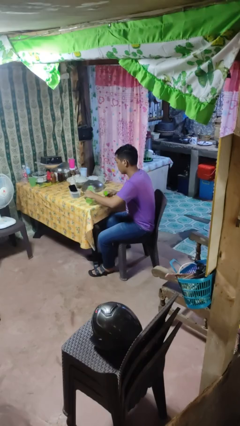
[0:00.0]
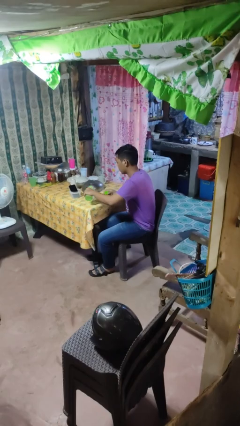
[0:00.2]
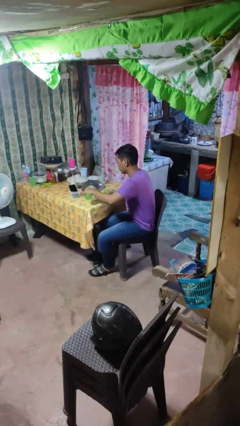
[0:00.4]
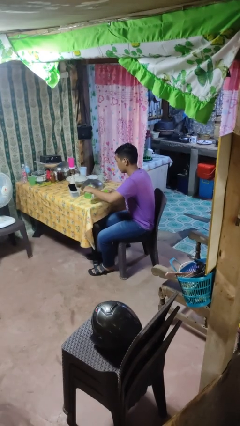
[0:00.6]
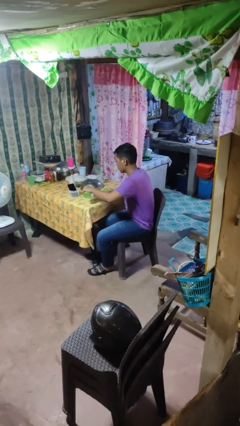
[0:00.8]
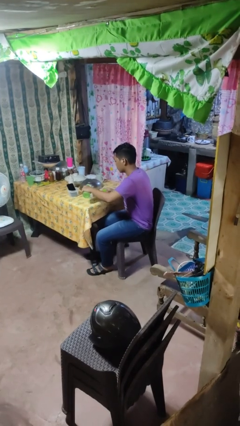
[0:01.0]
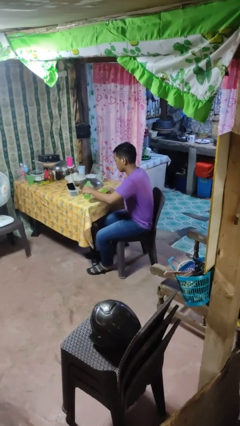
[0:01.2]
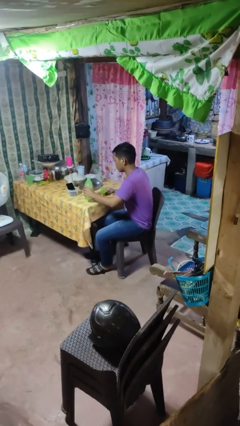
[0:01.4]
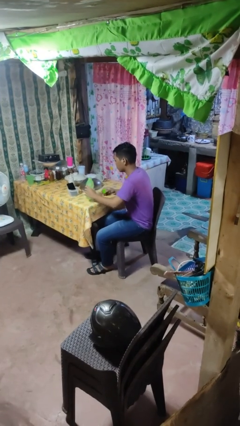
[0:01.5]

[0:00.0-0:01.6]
person pours liquid into cup

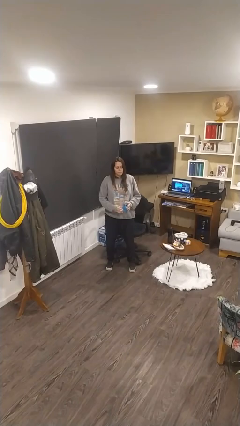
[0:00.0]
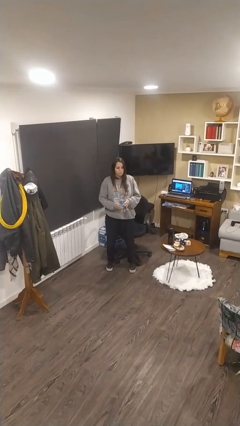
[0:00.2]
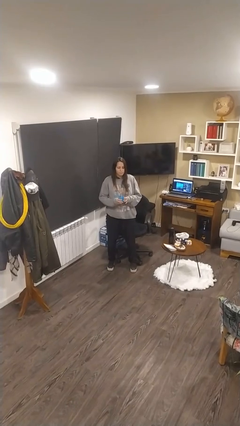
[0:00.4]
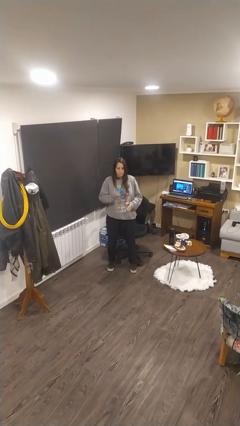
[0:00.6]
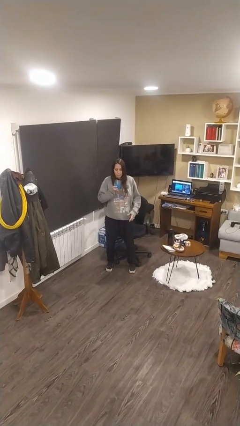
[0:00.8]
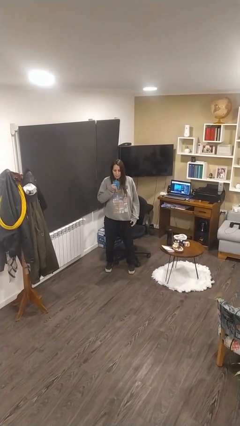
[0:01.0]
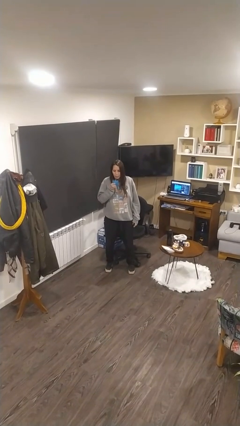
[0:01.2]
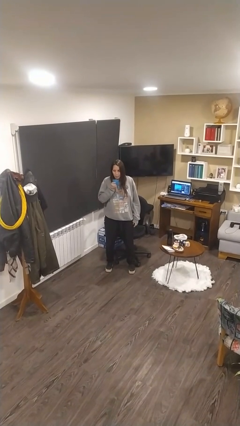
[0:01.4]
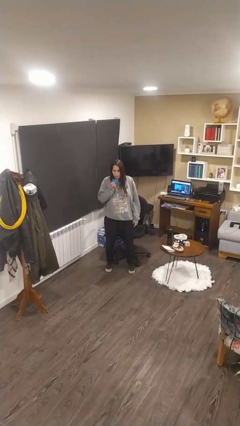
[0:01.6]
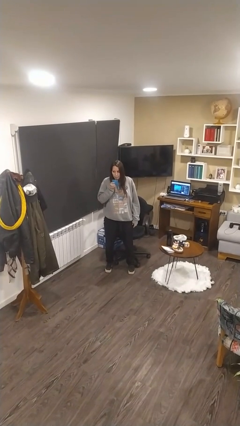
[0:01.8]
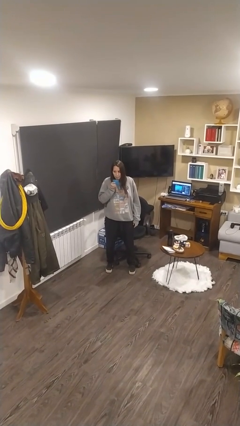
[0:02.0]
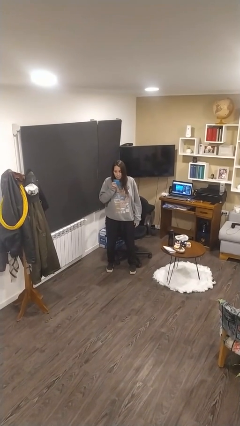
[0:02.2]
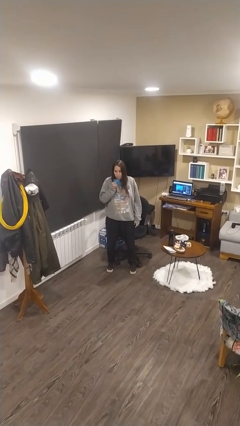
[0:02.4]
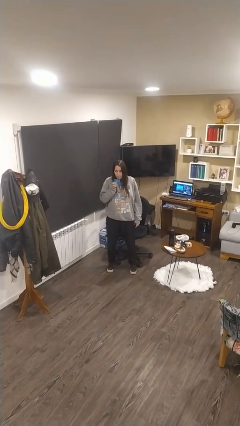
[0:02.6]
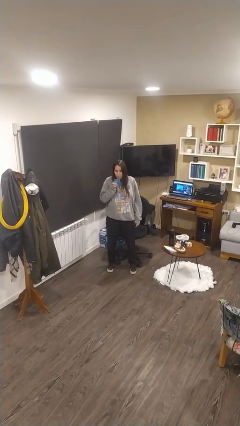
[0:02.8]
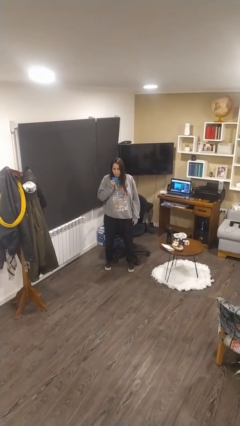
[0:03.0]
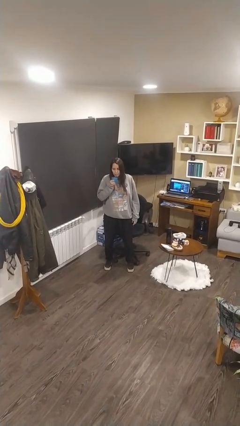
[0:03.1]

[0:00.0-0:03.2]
person drinks from straw

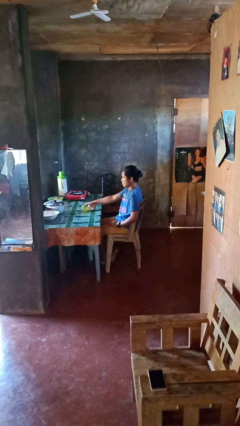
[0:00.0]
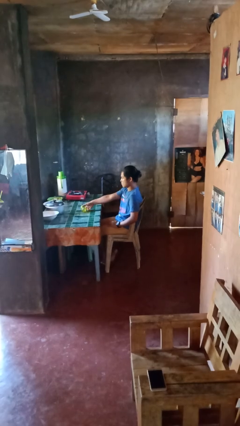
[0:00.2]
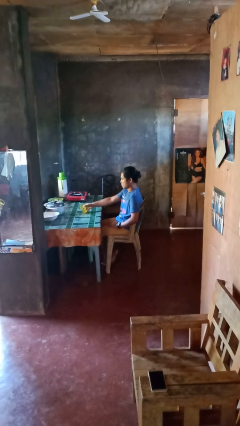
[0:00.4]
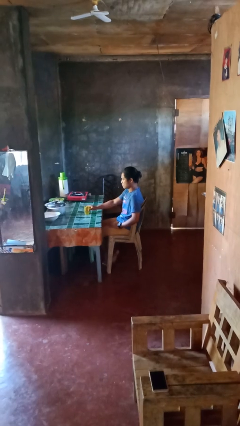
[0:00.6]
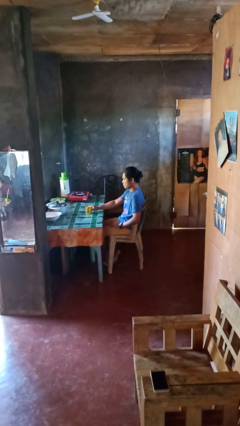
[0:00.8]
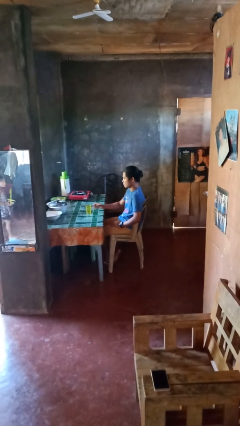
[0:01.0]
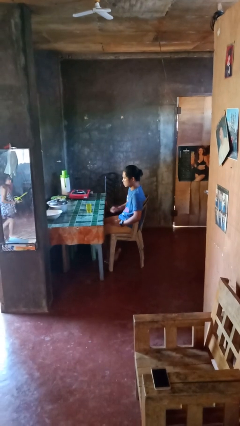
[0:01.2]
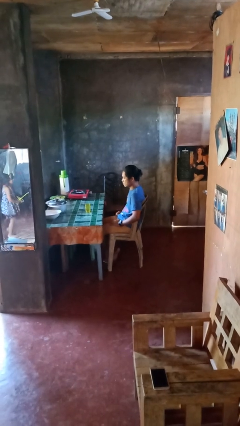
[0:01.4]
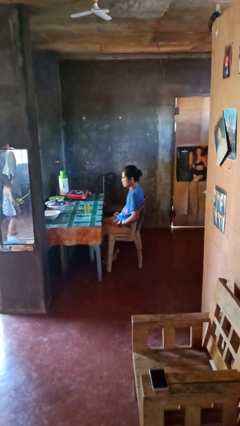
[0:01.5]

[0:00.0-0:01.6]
person sets upright glass

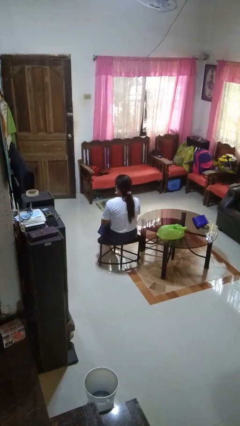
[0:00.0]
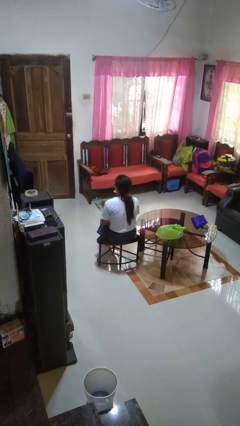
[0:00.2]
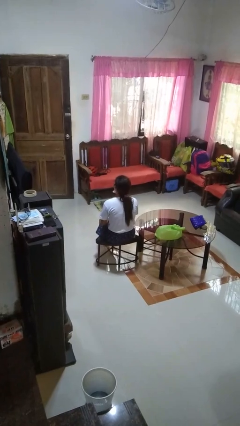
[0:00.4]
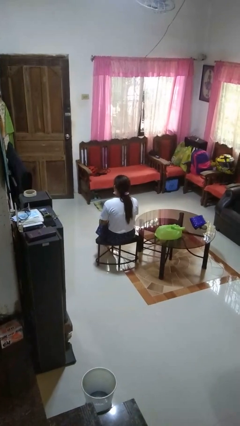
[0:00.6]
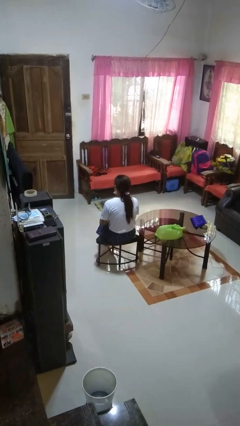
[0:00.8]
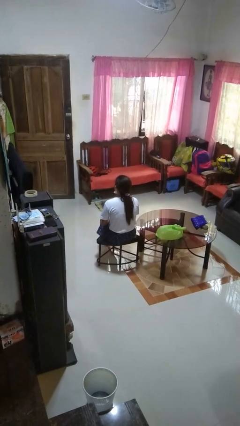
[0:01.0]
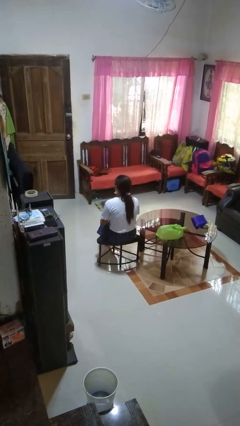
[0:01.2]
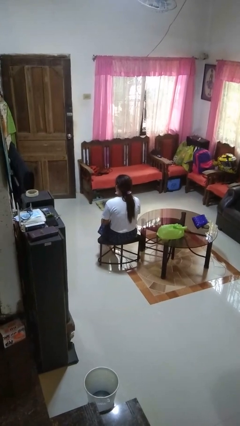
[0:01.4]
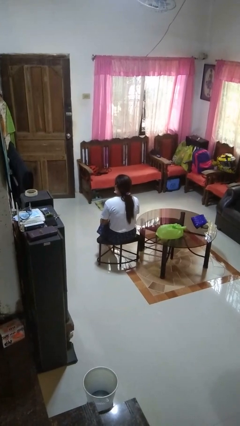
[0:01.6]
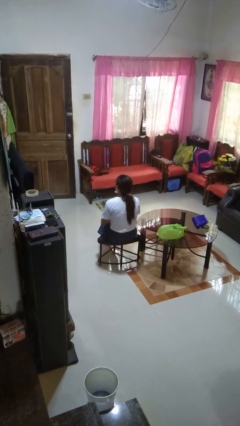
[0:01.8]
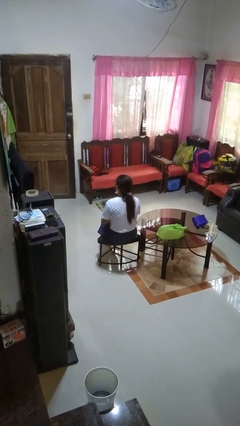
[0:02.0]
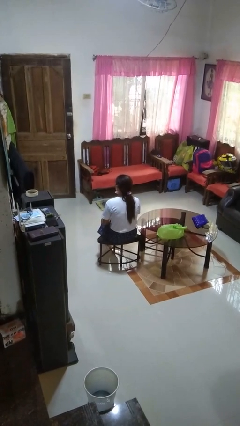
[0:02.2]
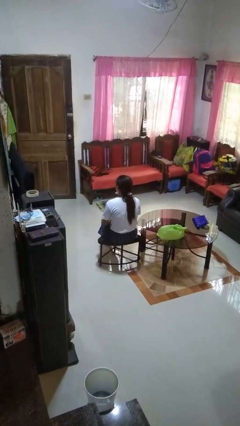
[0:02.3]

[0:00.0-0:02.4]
person nods head

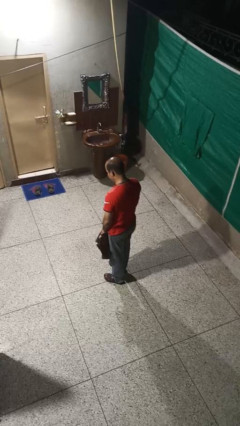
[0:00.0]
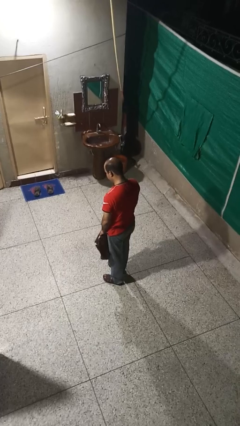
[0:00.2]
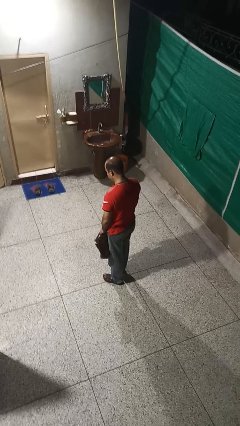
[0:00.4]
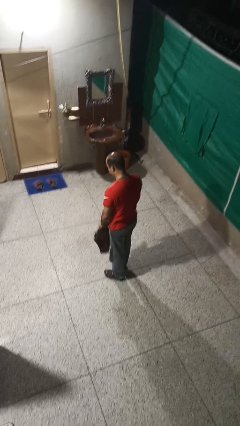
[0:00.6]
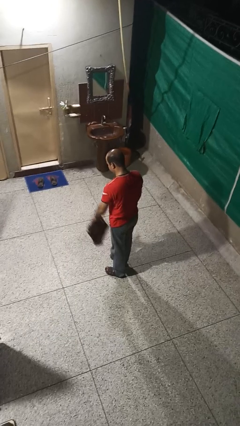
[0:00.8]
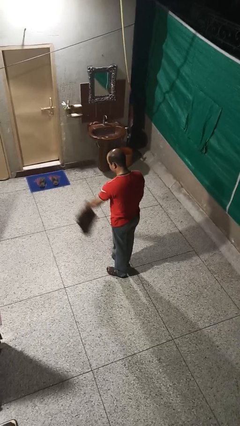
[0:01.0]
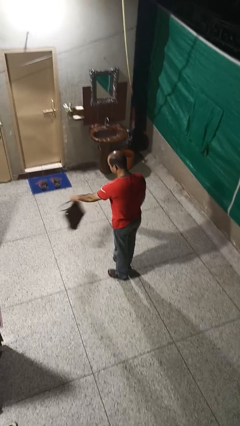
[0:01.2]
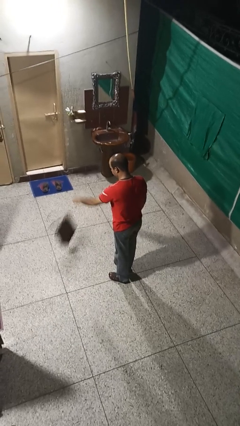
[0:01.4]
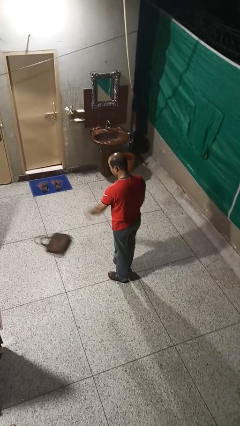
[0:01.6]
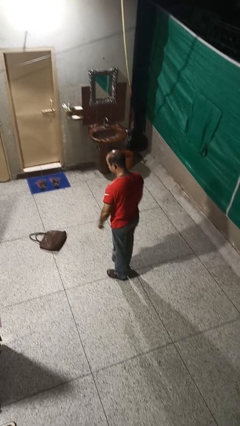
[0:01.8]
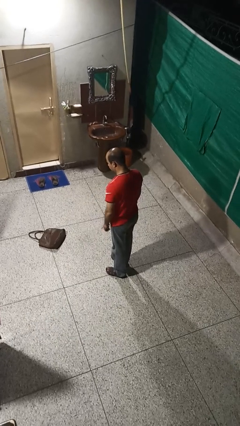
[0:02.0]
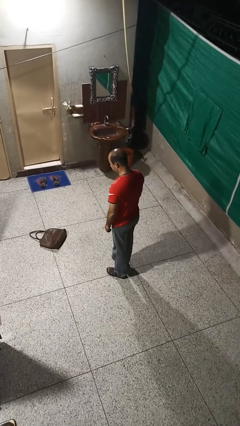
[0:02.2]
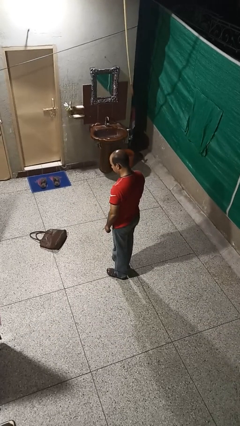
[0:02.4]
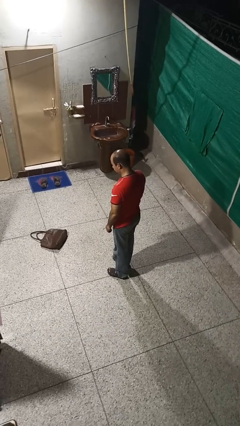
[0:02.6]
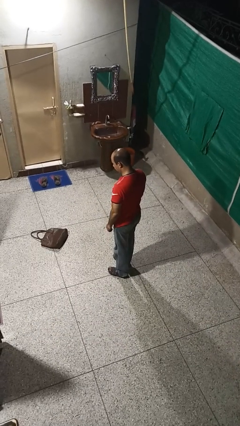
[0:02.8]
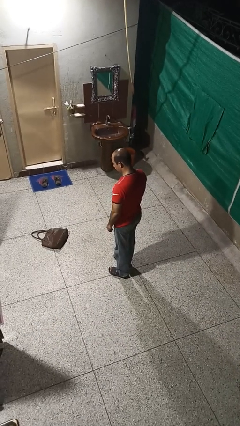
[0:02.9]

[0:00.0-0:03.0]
person throws object to ground

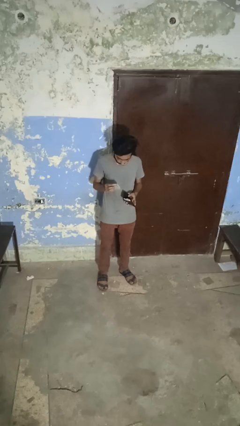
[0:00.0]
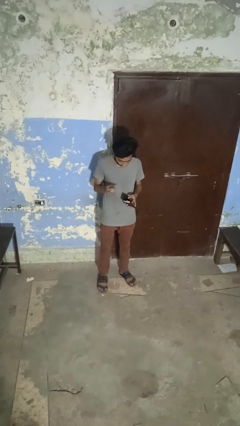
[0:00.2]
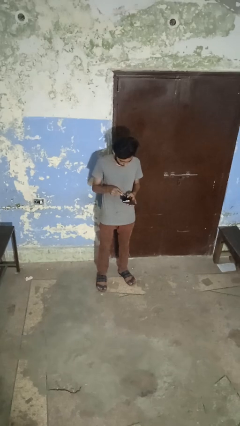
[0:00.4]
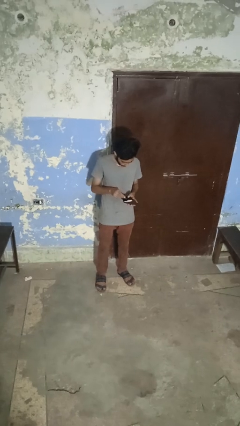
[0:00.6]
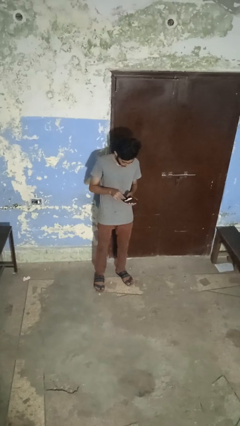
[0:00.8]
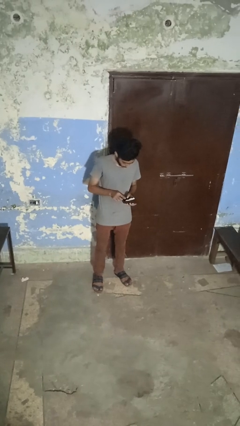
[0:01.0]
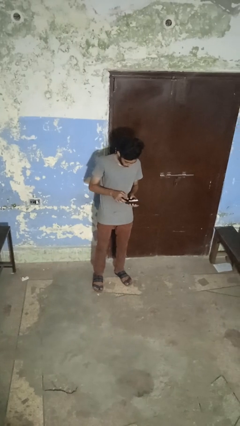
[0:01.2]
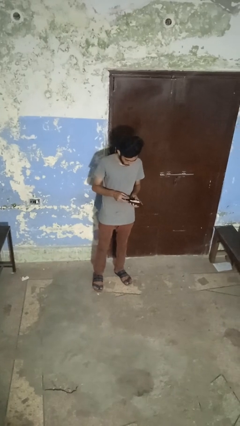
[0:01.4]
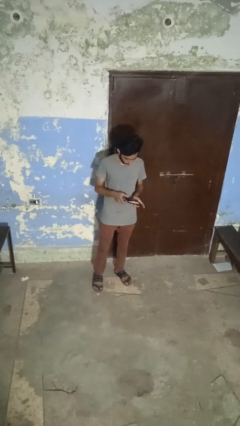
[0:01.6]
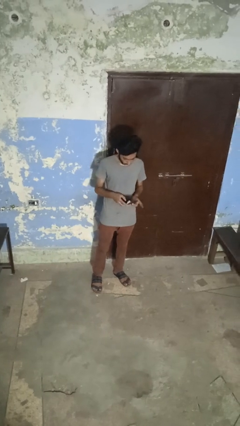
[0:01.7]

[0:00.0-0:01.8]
person puts object into purse

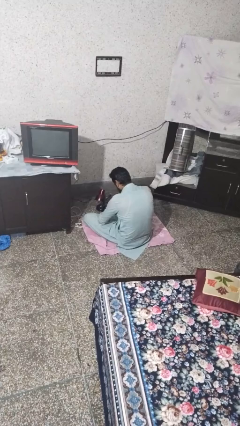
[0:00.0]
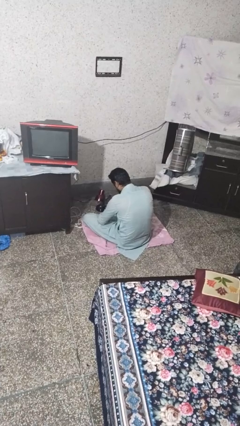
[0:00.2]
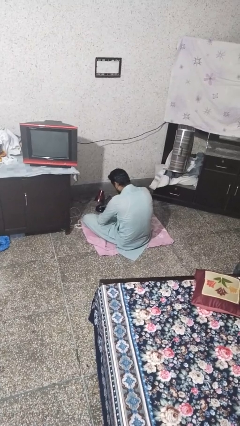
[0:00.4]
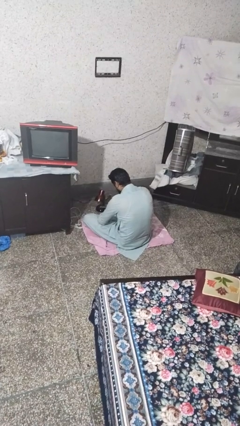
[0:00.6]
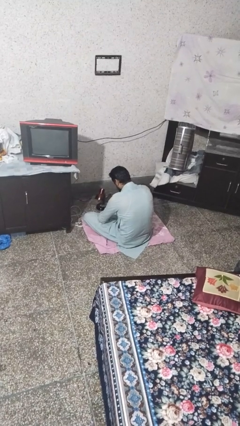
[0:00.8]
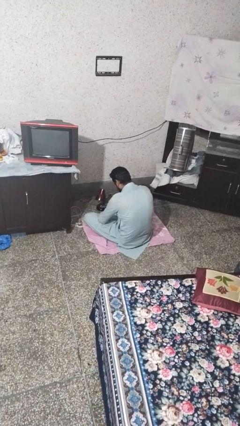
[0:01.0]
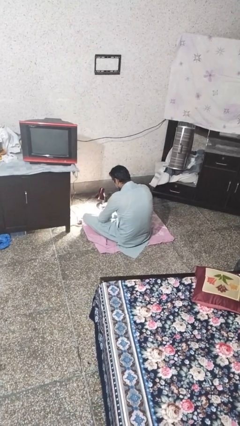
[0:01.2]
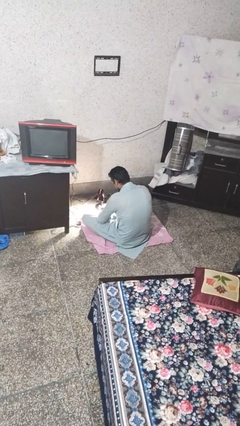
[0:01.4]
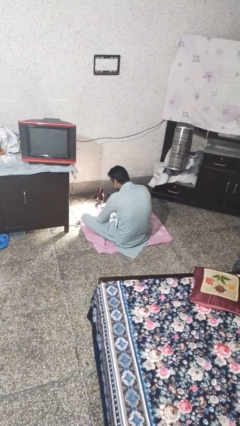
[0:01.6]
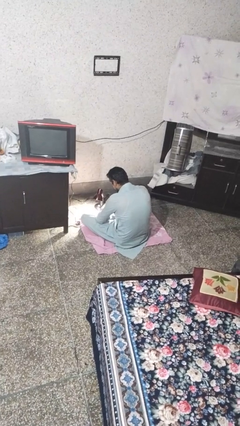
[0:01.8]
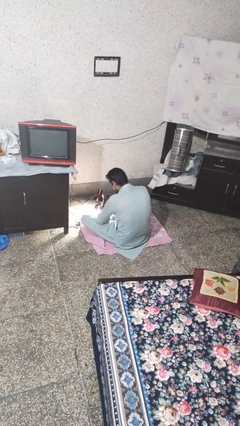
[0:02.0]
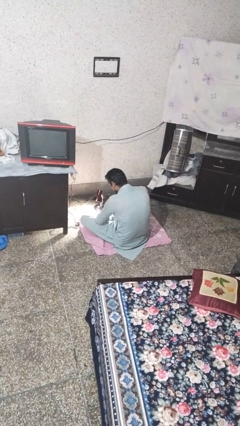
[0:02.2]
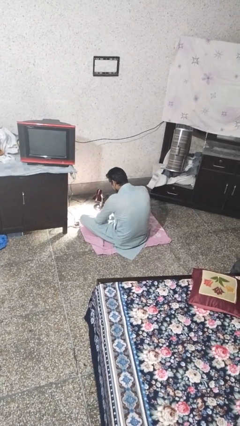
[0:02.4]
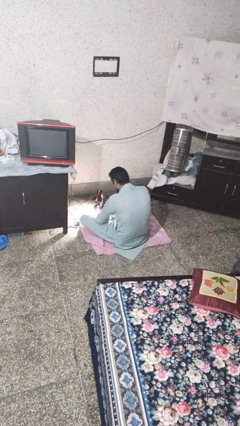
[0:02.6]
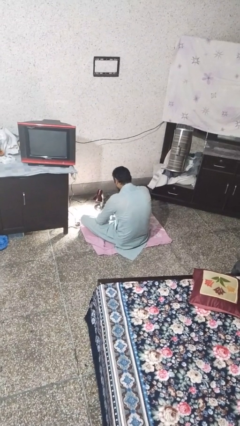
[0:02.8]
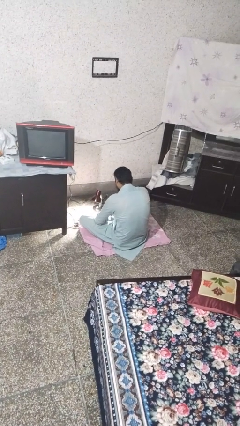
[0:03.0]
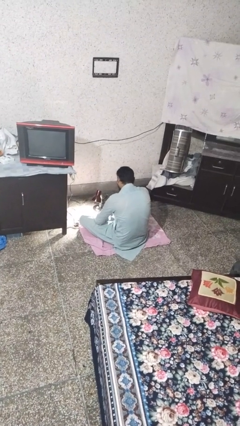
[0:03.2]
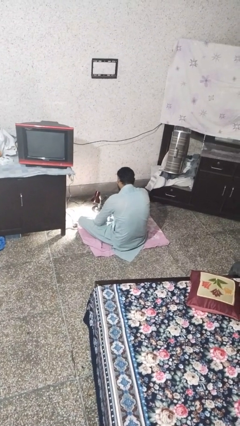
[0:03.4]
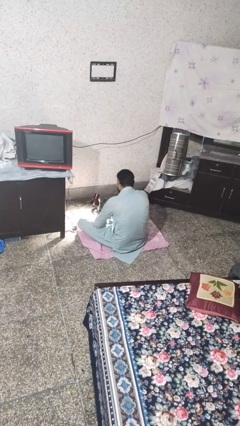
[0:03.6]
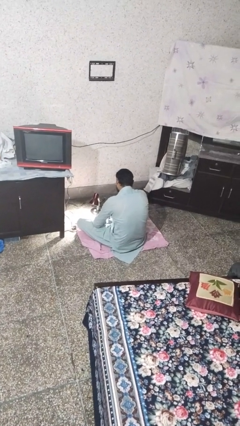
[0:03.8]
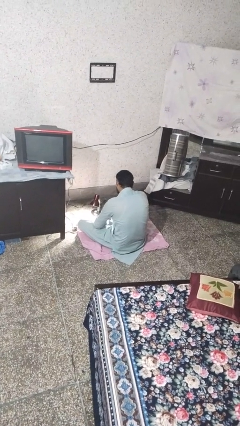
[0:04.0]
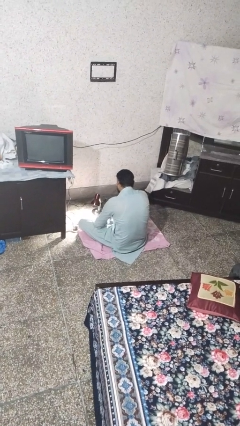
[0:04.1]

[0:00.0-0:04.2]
person turns on lamp
